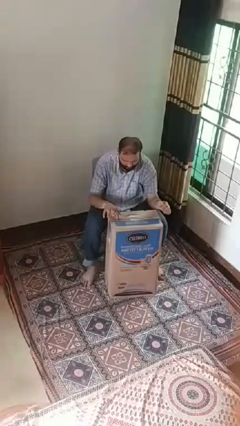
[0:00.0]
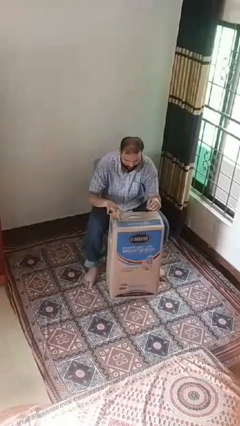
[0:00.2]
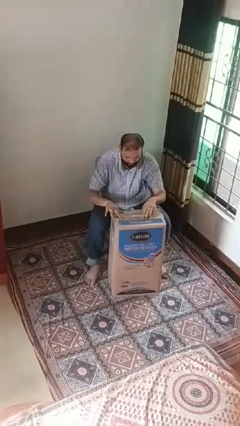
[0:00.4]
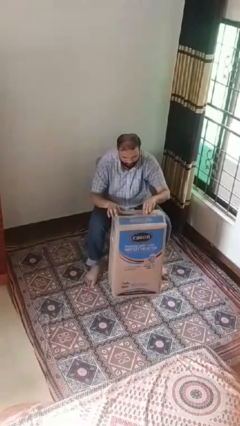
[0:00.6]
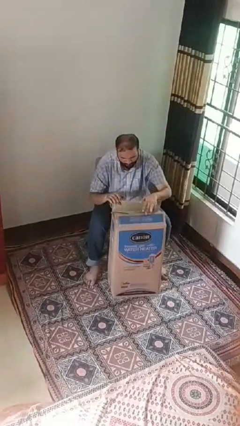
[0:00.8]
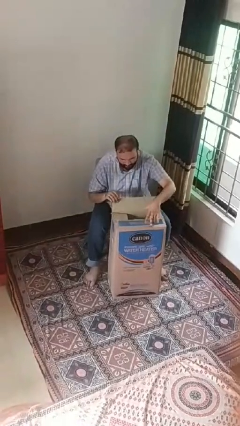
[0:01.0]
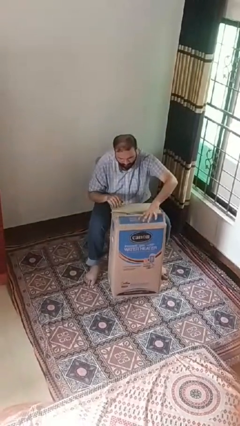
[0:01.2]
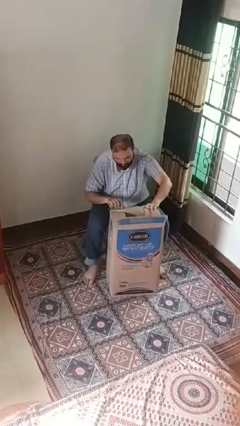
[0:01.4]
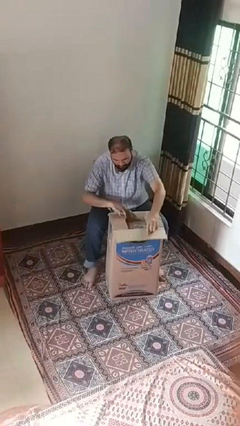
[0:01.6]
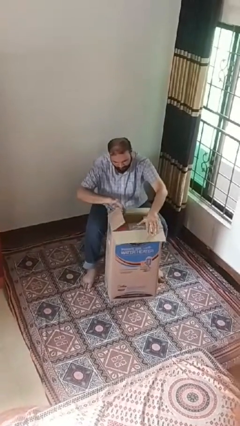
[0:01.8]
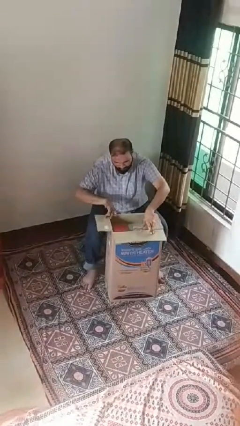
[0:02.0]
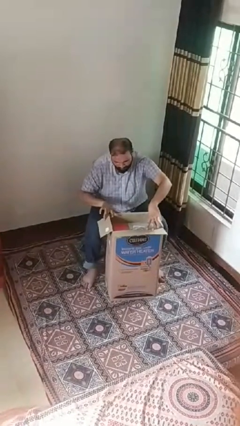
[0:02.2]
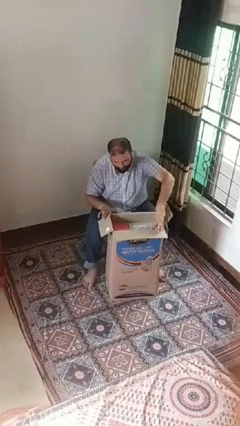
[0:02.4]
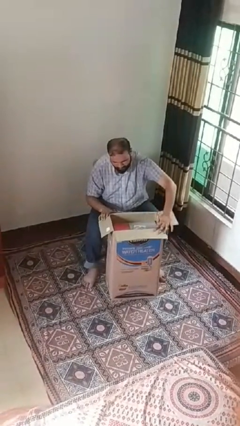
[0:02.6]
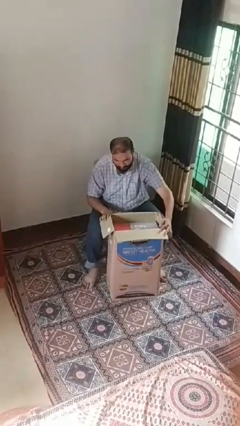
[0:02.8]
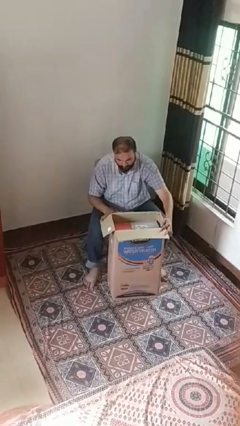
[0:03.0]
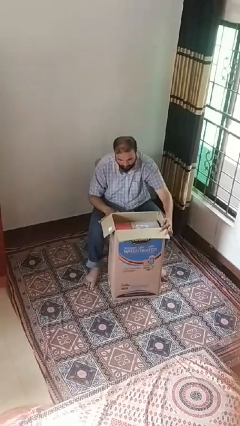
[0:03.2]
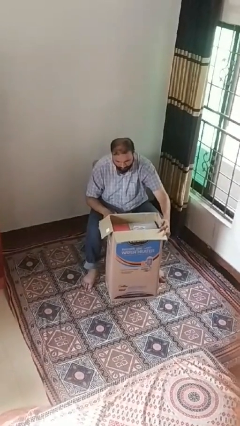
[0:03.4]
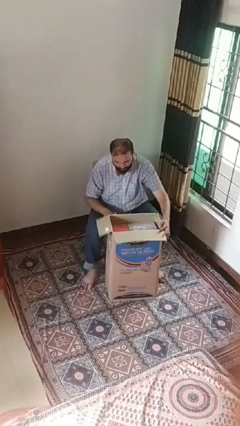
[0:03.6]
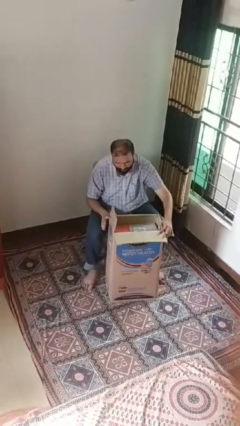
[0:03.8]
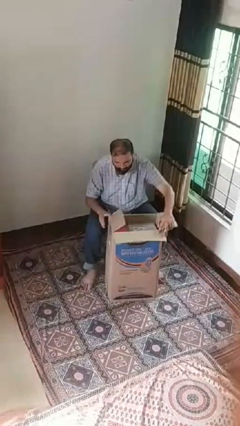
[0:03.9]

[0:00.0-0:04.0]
person opens box

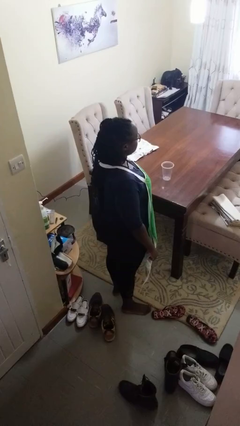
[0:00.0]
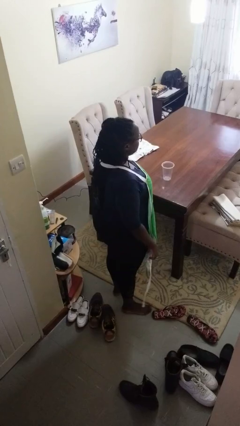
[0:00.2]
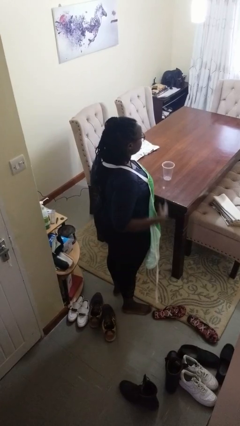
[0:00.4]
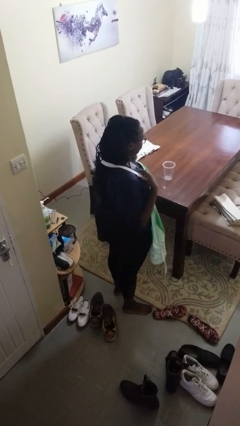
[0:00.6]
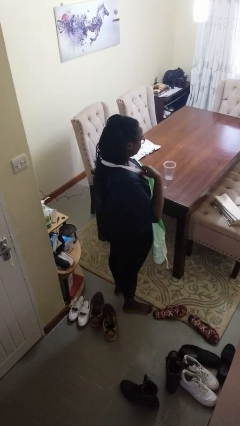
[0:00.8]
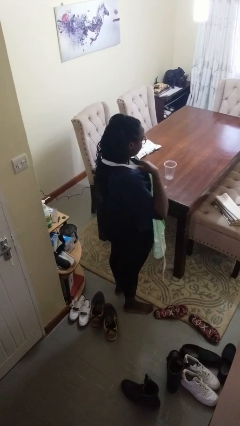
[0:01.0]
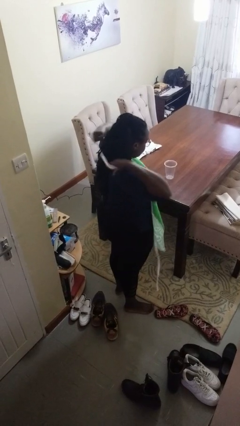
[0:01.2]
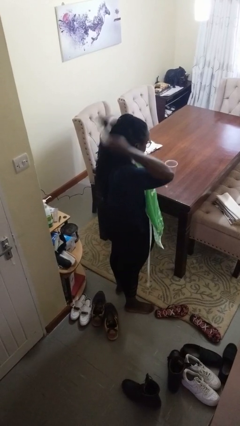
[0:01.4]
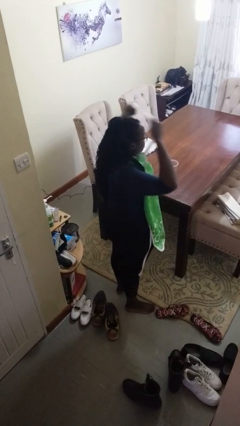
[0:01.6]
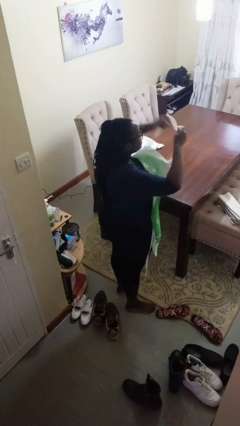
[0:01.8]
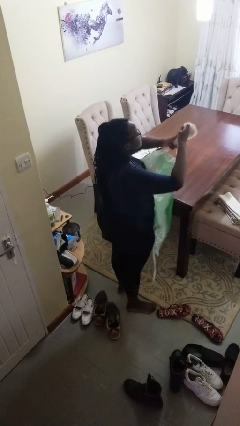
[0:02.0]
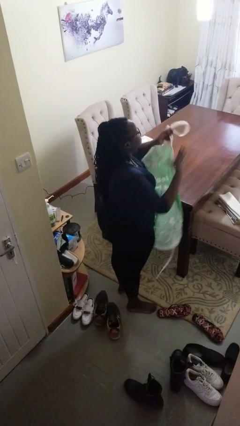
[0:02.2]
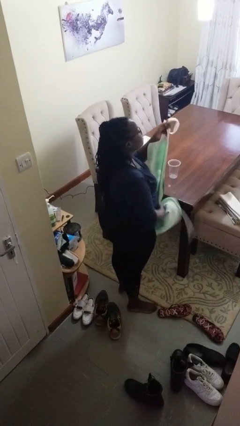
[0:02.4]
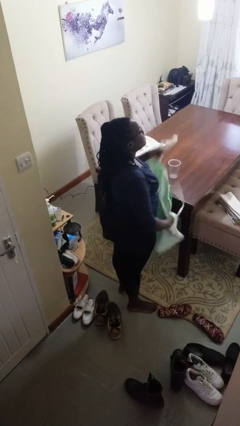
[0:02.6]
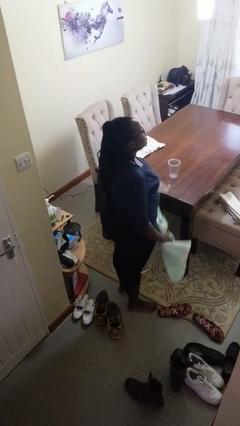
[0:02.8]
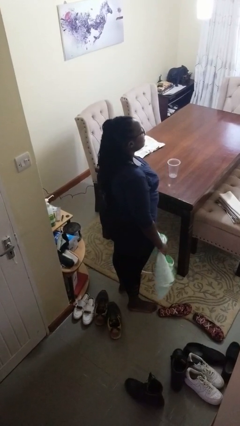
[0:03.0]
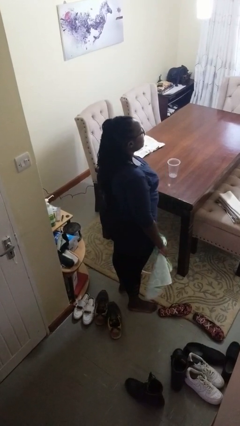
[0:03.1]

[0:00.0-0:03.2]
person takes off apron

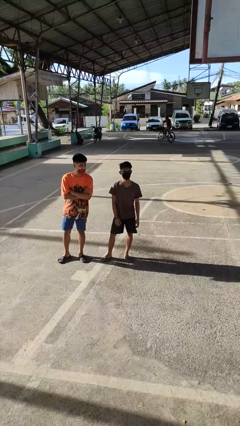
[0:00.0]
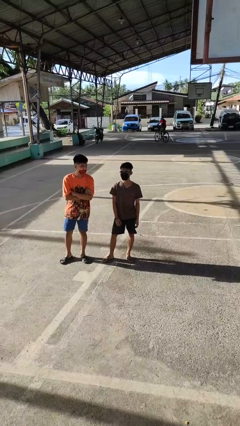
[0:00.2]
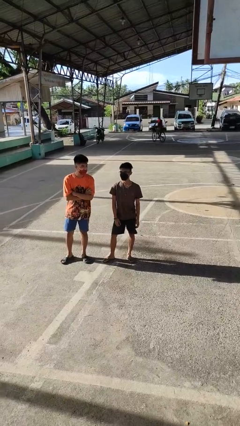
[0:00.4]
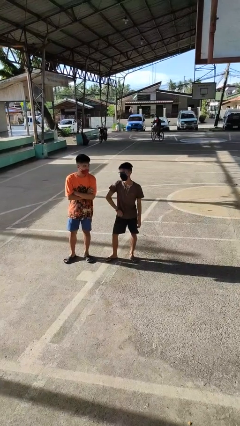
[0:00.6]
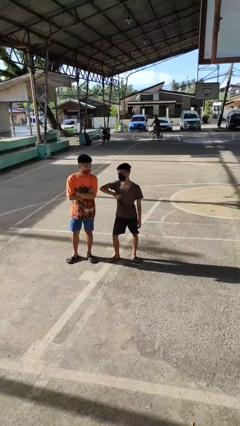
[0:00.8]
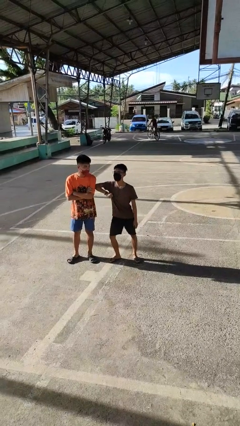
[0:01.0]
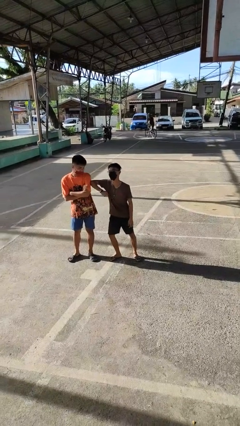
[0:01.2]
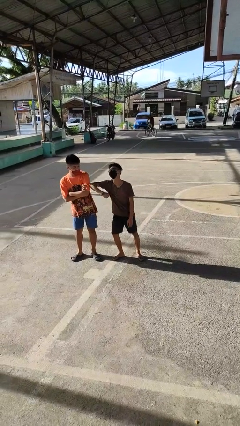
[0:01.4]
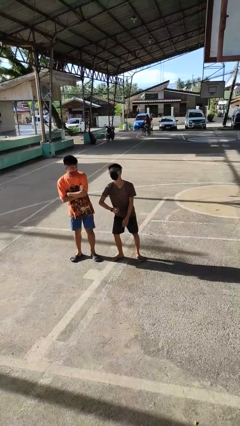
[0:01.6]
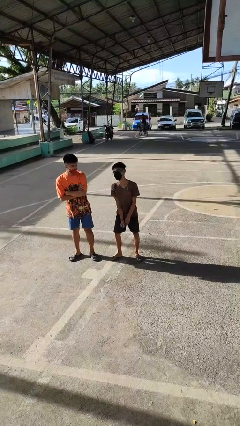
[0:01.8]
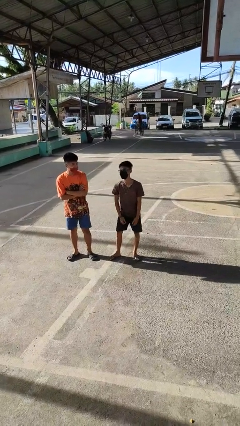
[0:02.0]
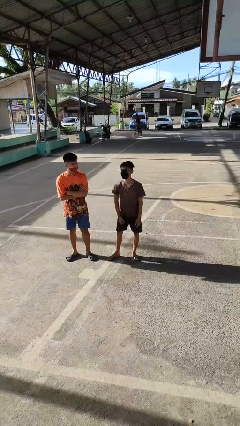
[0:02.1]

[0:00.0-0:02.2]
person nudges person with elbow

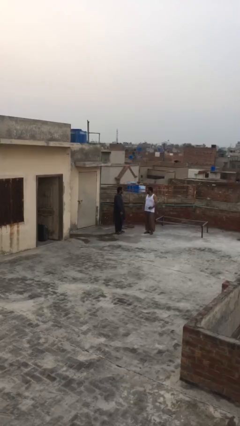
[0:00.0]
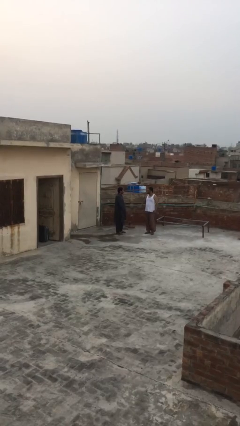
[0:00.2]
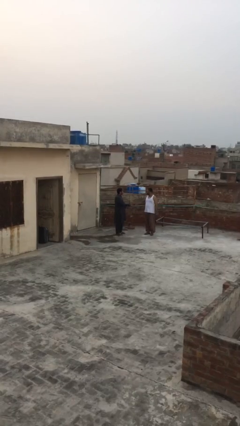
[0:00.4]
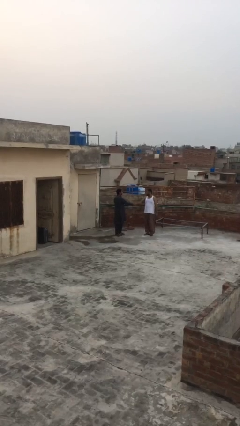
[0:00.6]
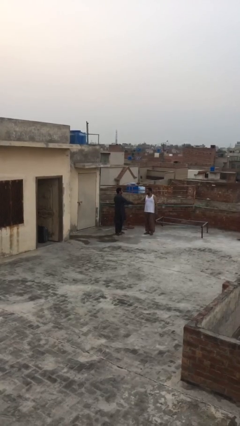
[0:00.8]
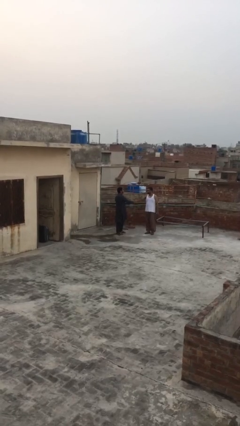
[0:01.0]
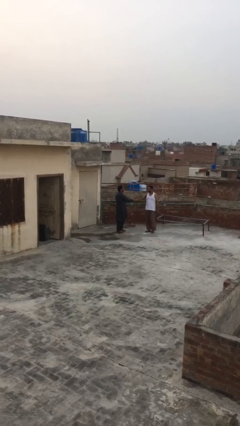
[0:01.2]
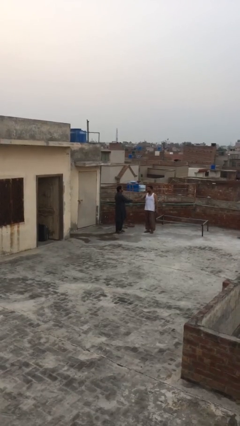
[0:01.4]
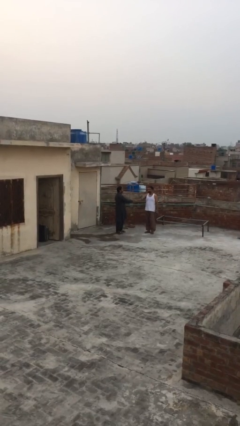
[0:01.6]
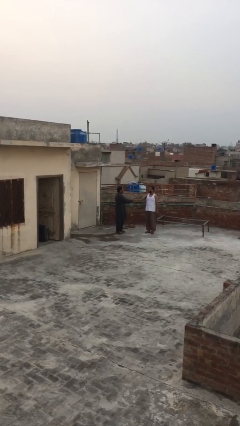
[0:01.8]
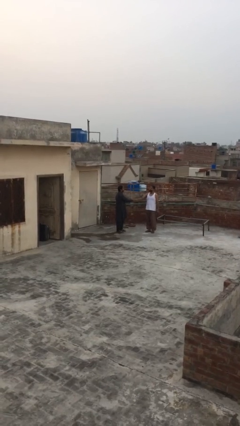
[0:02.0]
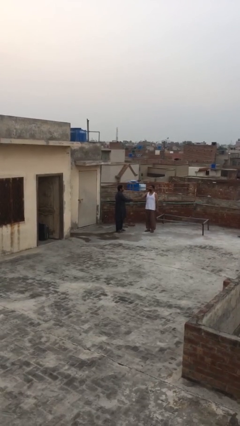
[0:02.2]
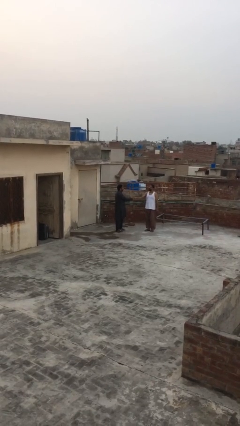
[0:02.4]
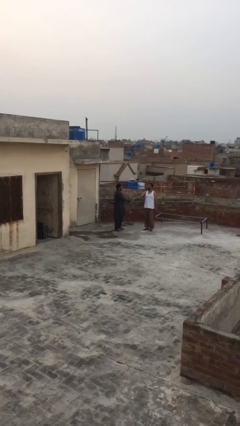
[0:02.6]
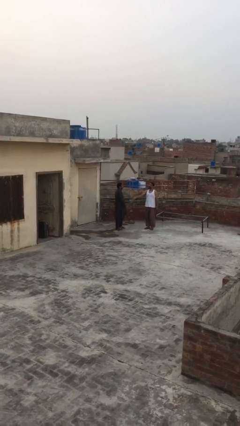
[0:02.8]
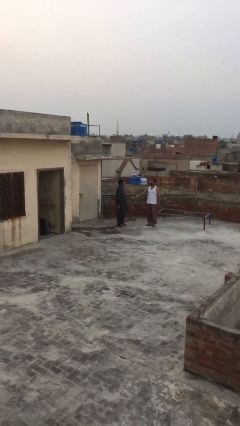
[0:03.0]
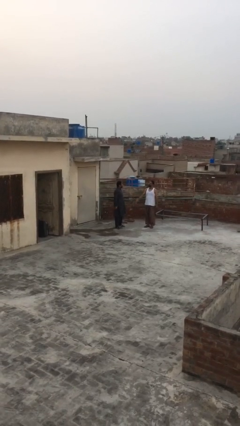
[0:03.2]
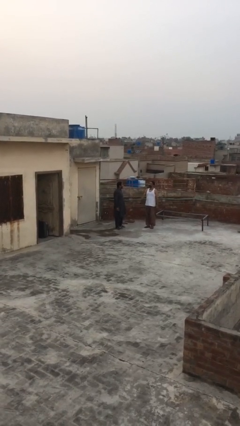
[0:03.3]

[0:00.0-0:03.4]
person shakes hand

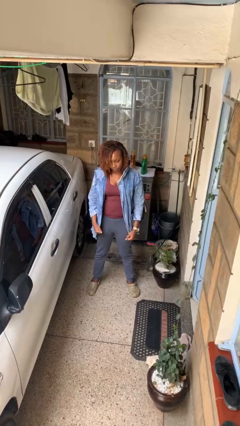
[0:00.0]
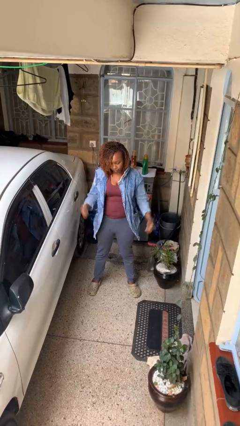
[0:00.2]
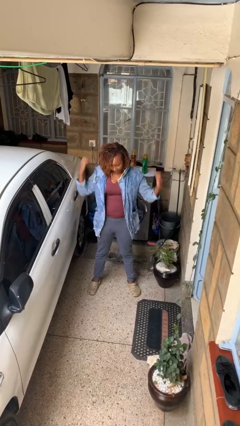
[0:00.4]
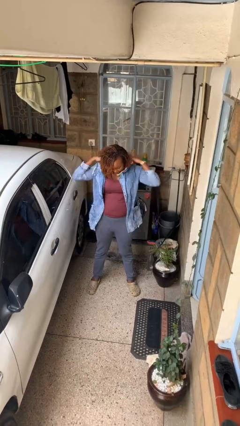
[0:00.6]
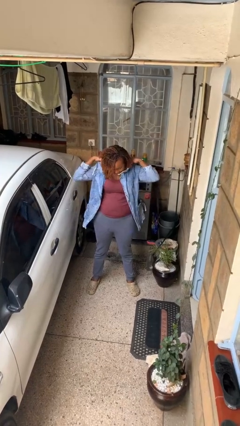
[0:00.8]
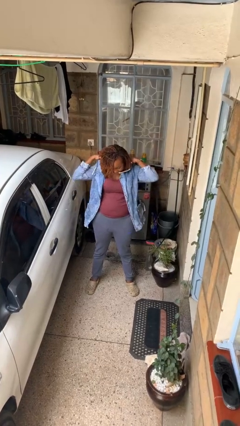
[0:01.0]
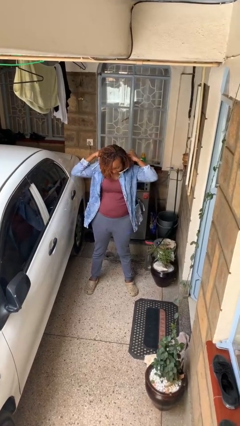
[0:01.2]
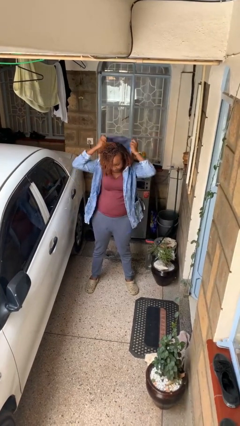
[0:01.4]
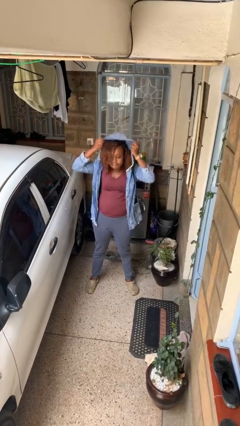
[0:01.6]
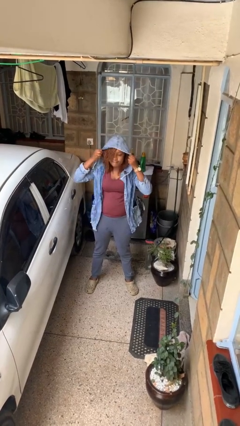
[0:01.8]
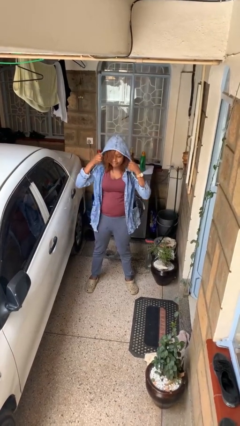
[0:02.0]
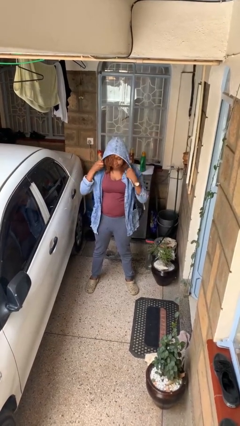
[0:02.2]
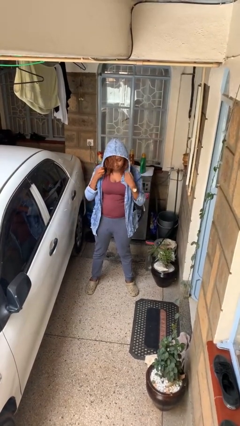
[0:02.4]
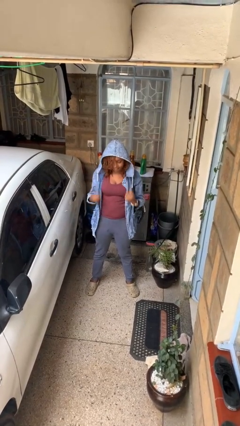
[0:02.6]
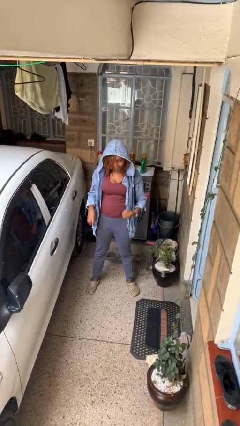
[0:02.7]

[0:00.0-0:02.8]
person puts on hoodie

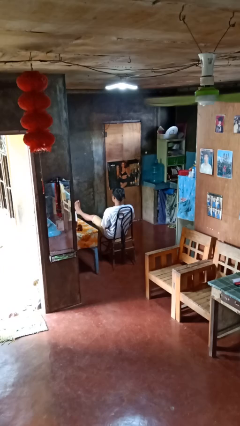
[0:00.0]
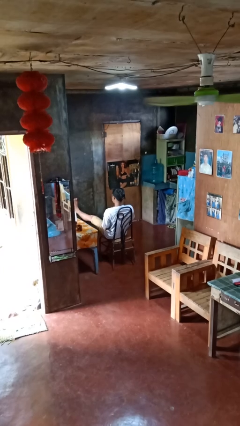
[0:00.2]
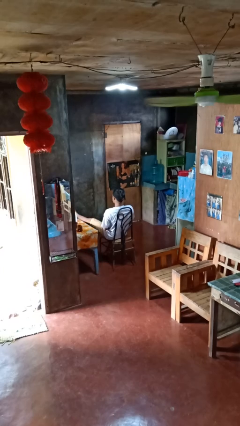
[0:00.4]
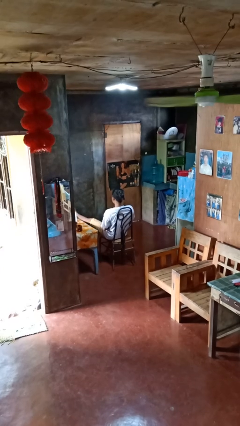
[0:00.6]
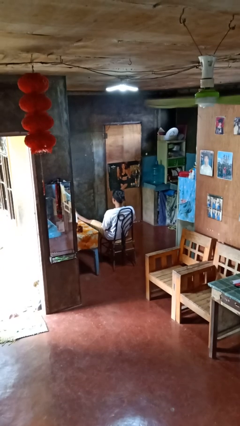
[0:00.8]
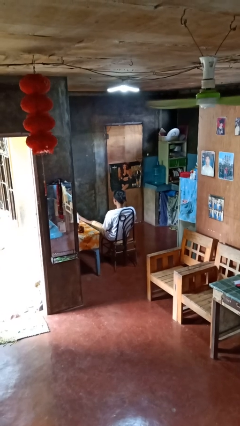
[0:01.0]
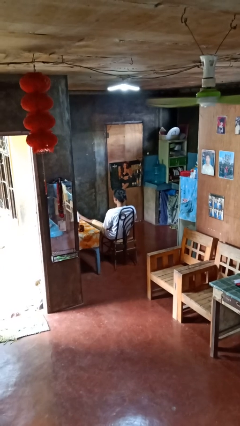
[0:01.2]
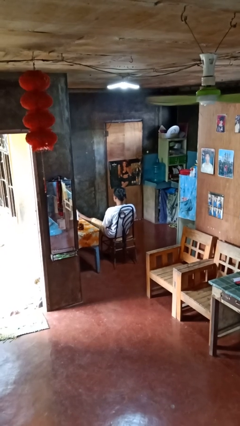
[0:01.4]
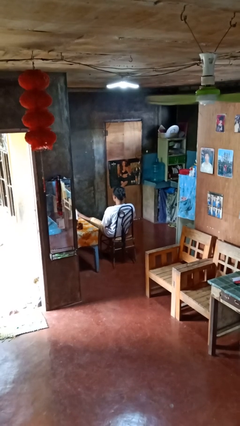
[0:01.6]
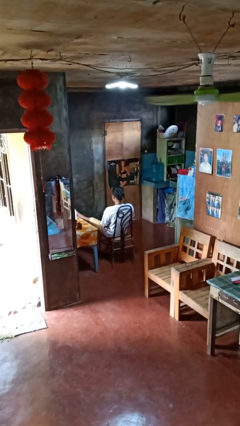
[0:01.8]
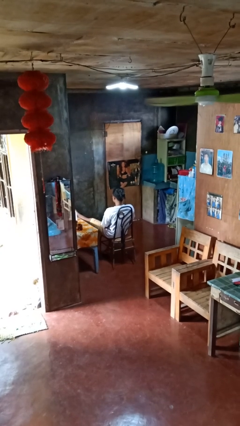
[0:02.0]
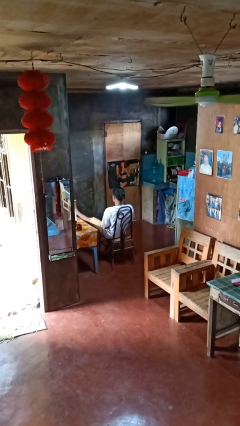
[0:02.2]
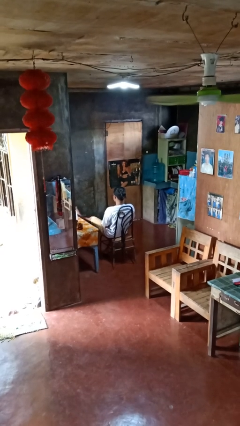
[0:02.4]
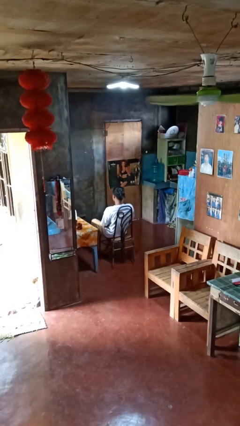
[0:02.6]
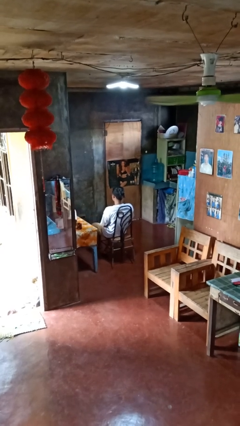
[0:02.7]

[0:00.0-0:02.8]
person puts feet up
